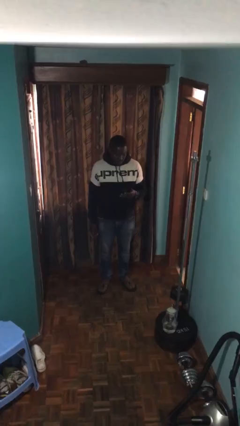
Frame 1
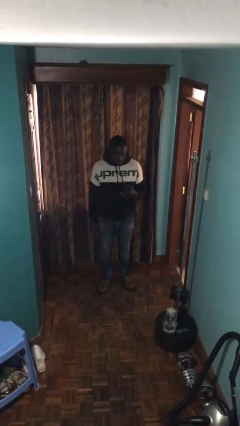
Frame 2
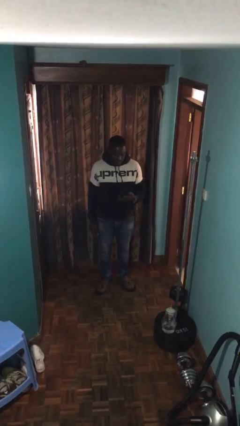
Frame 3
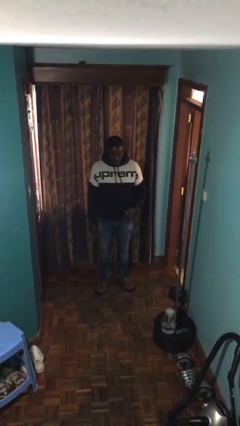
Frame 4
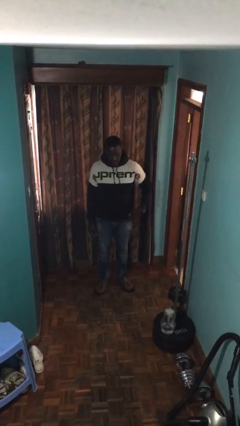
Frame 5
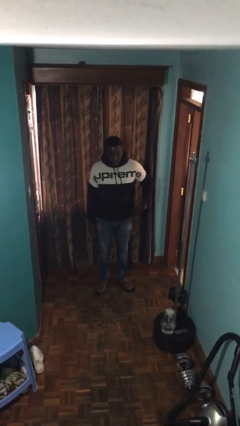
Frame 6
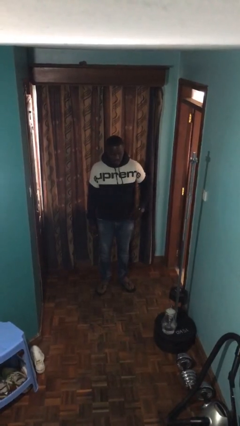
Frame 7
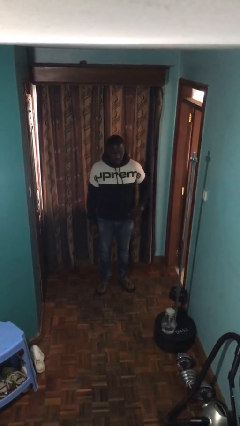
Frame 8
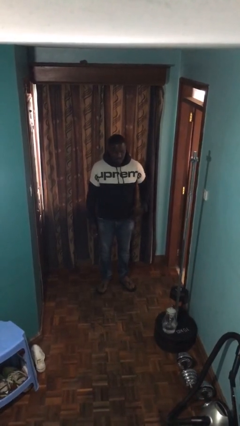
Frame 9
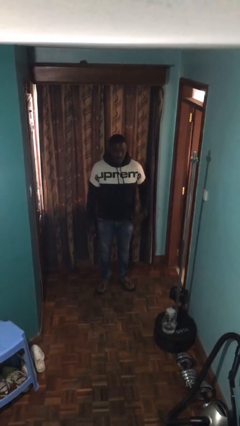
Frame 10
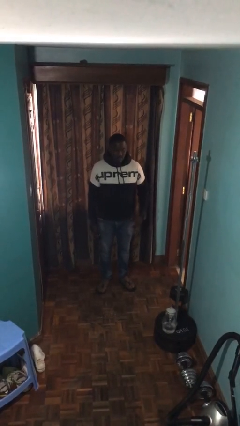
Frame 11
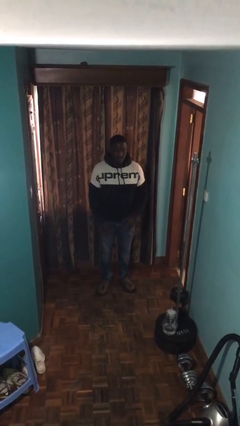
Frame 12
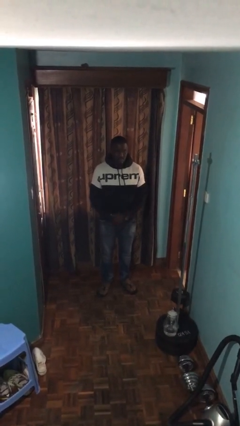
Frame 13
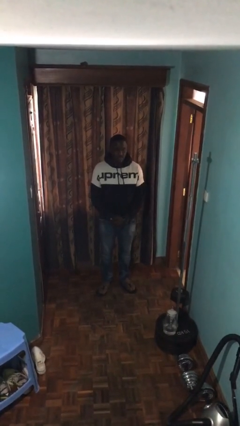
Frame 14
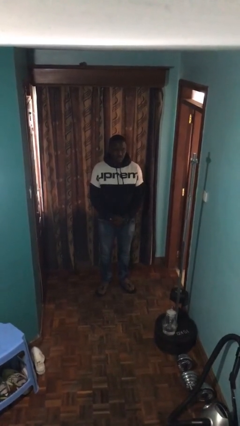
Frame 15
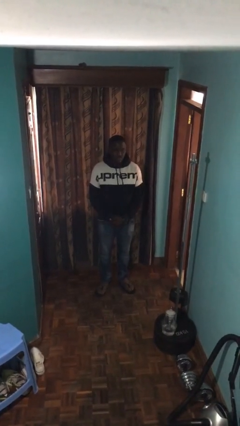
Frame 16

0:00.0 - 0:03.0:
person puts phone into pocket

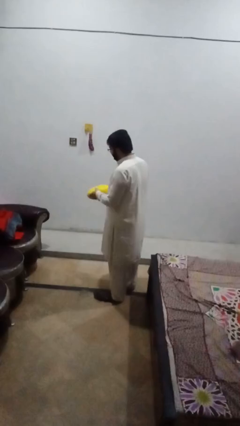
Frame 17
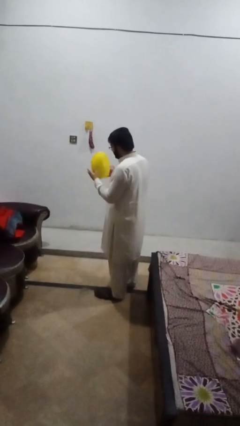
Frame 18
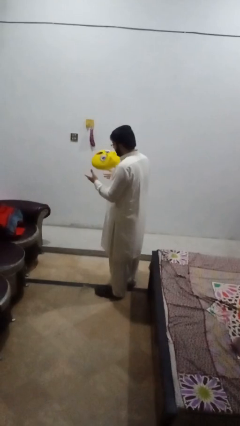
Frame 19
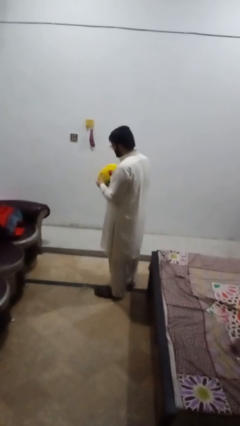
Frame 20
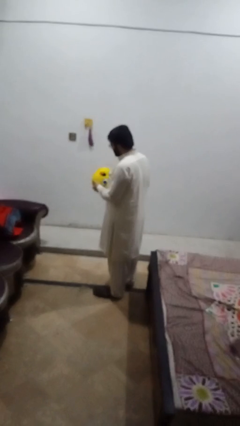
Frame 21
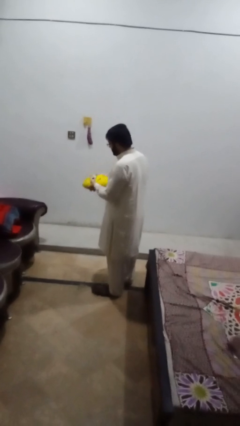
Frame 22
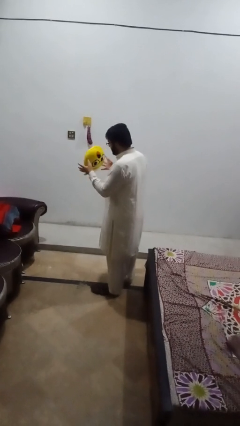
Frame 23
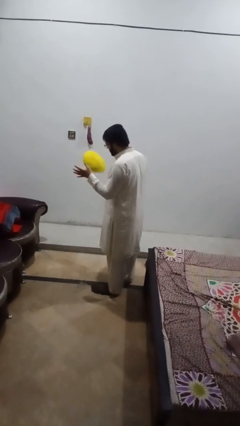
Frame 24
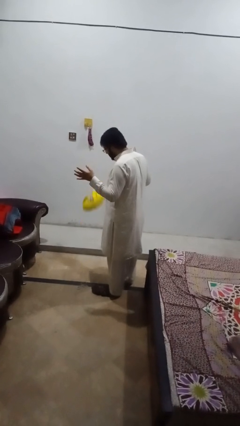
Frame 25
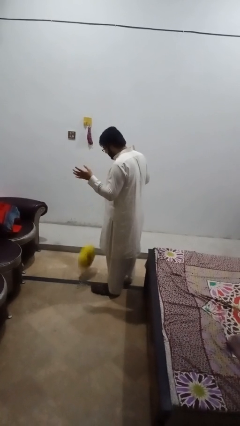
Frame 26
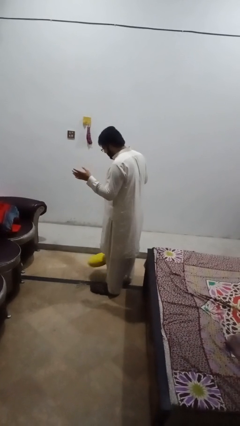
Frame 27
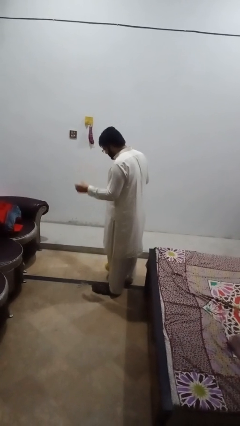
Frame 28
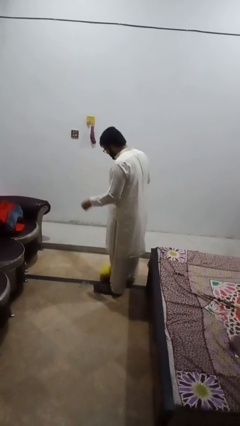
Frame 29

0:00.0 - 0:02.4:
person drops object

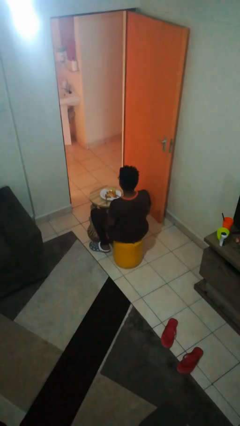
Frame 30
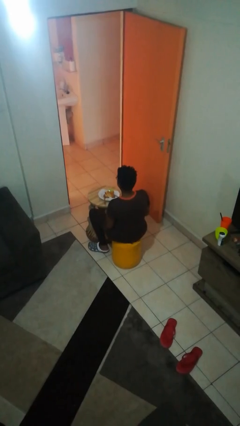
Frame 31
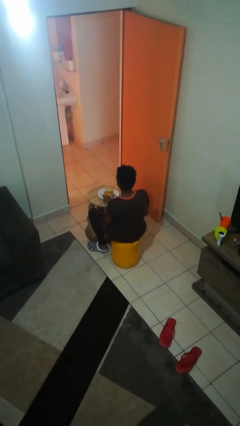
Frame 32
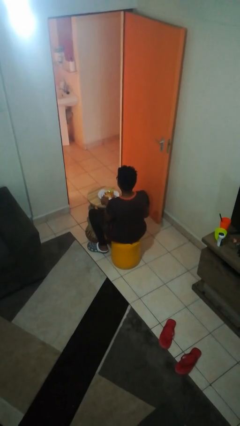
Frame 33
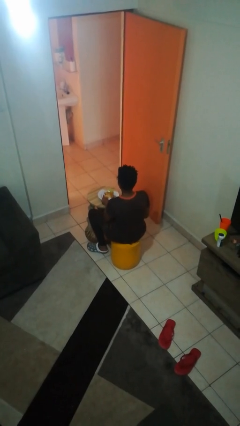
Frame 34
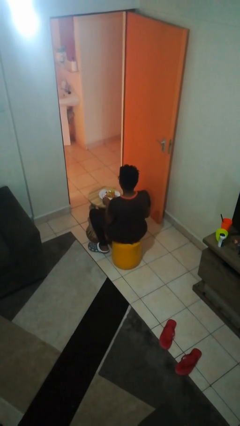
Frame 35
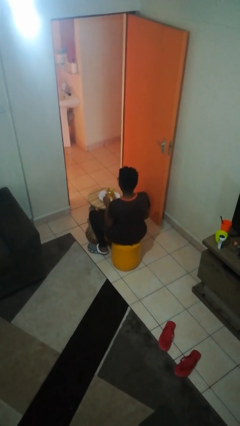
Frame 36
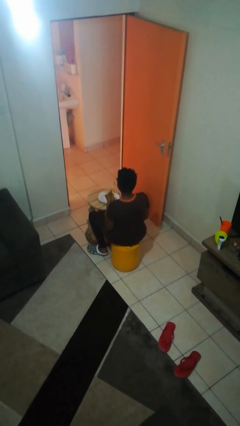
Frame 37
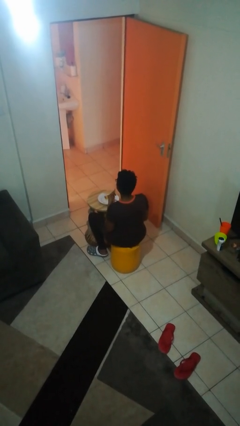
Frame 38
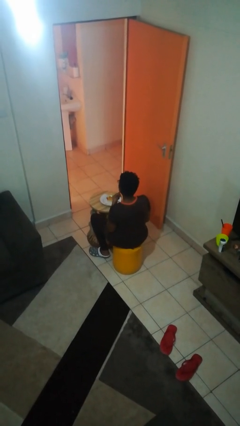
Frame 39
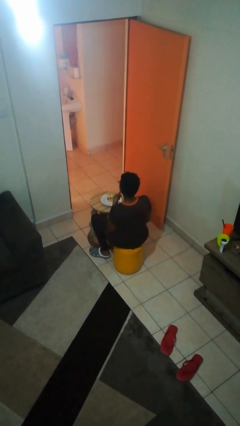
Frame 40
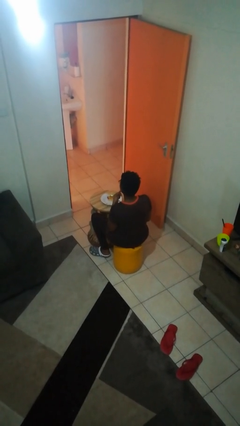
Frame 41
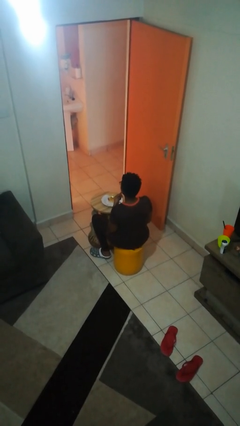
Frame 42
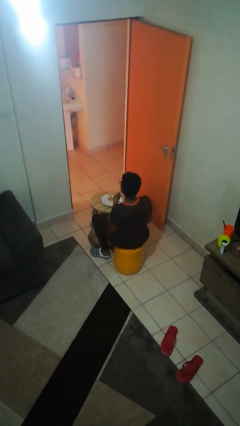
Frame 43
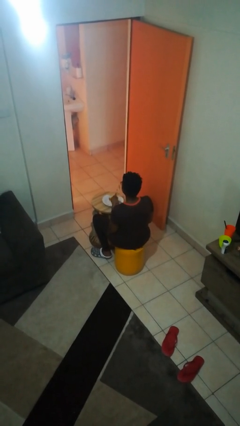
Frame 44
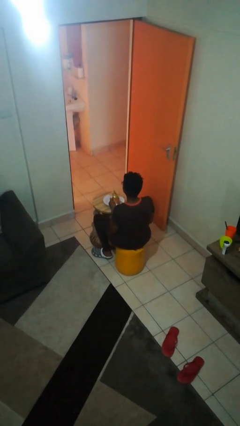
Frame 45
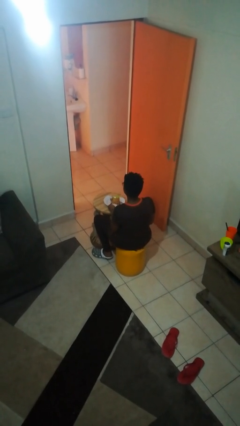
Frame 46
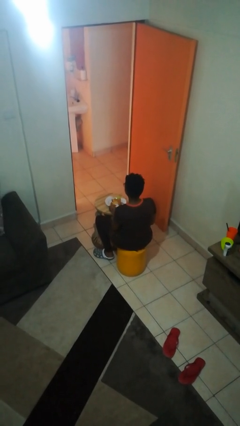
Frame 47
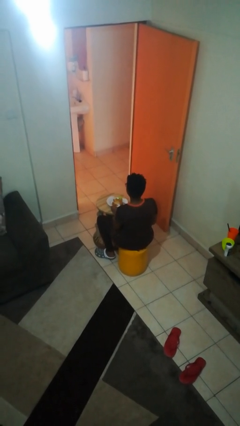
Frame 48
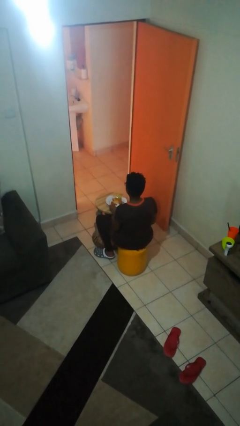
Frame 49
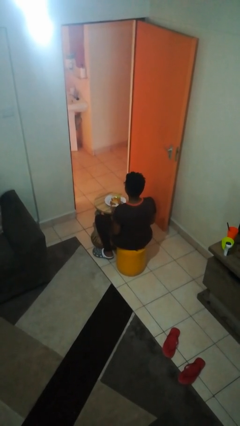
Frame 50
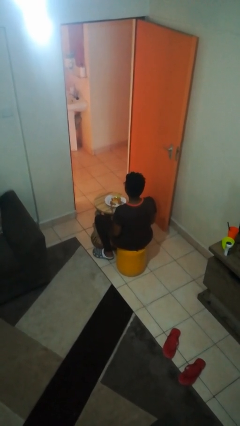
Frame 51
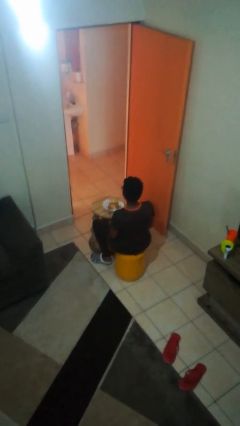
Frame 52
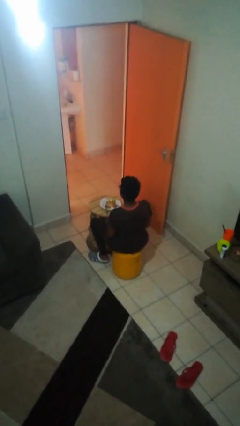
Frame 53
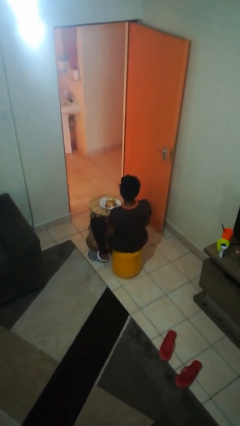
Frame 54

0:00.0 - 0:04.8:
person eats with utensil

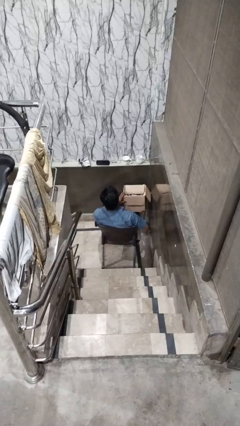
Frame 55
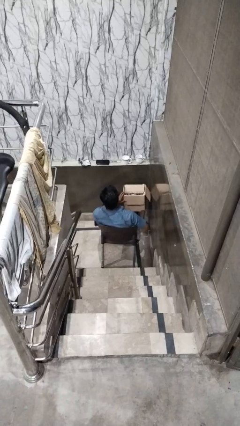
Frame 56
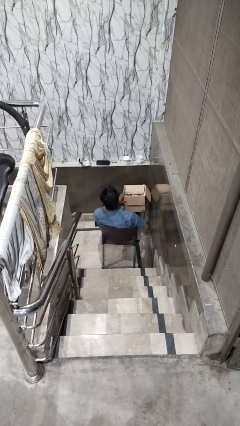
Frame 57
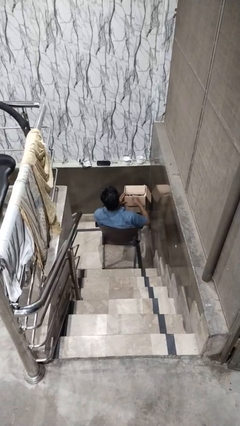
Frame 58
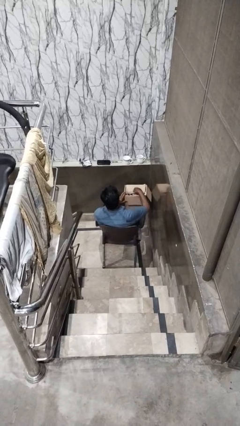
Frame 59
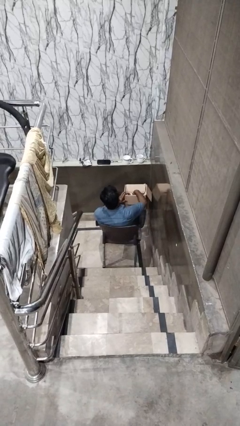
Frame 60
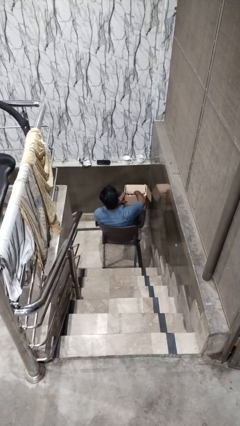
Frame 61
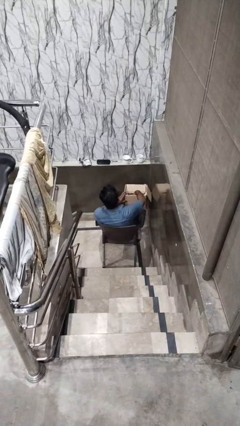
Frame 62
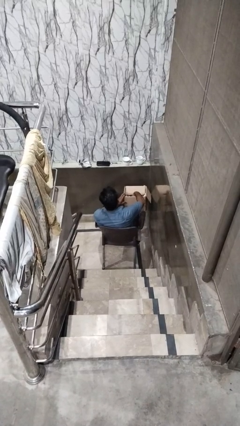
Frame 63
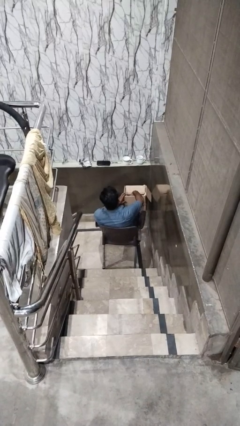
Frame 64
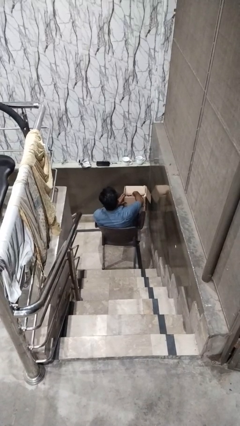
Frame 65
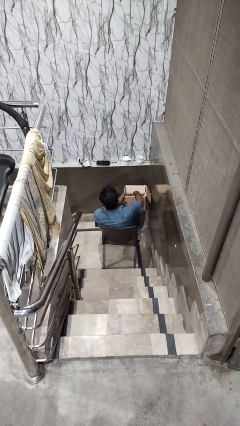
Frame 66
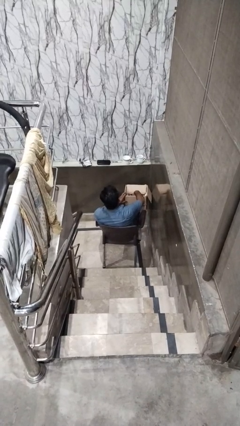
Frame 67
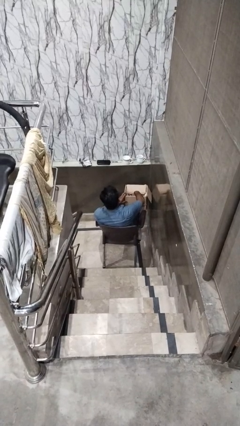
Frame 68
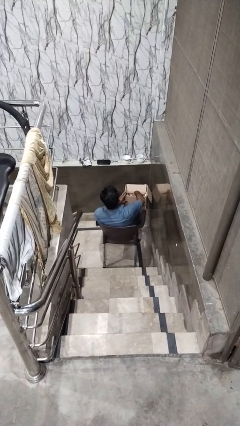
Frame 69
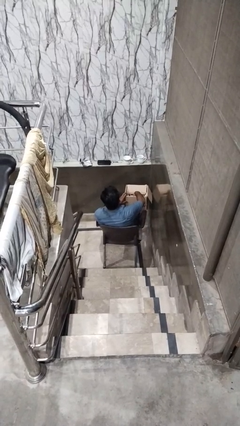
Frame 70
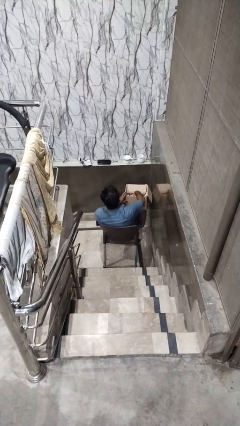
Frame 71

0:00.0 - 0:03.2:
person searches in box

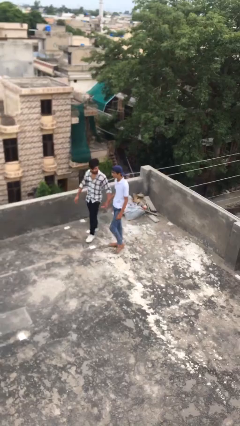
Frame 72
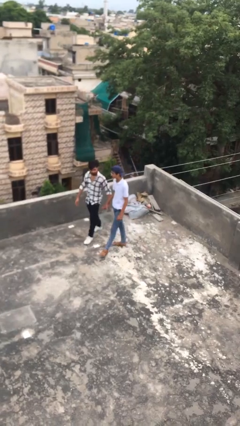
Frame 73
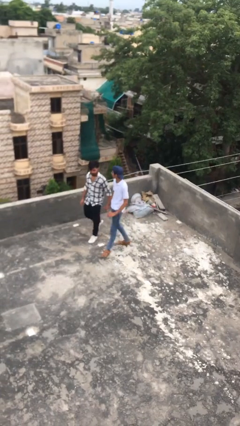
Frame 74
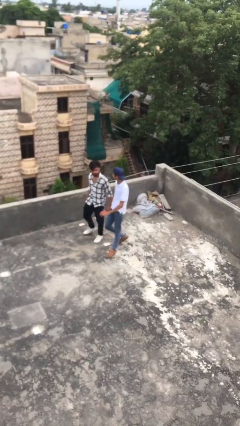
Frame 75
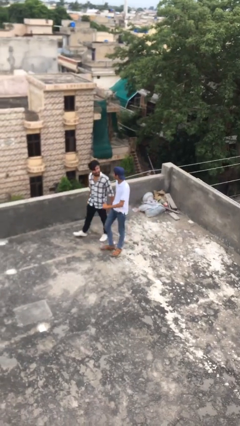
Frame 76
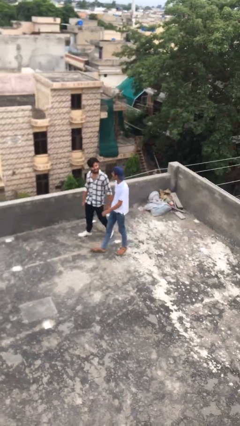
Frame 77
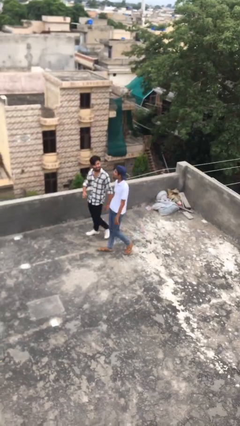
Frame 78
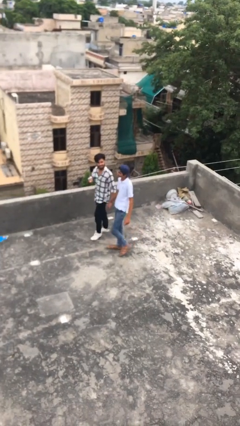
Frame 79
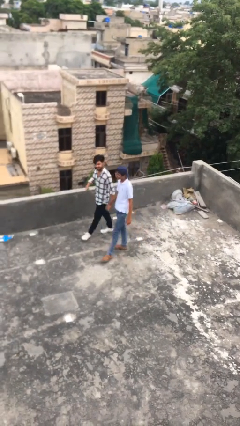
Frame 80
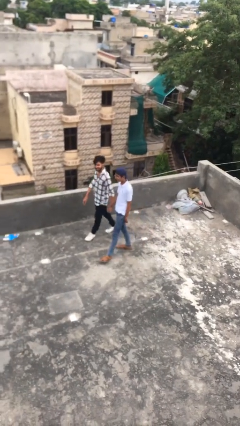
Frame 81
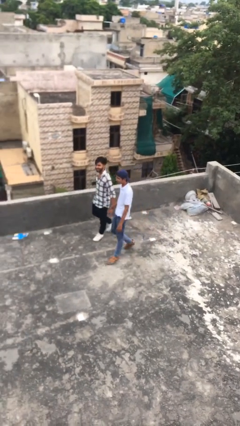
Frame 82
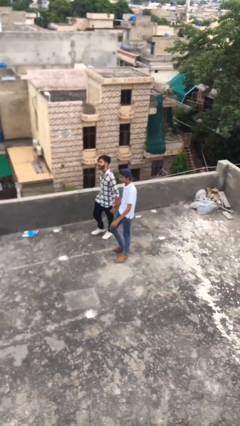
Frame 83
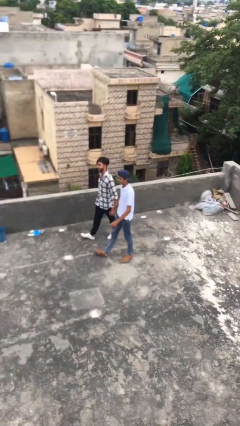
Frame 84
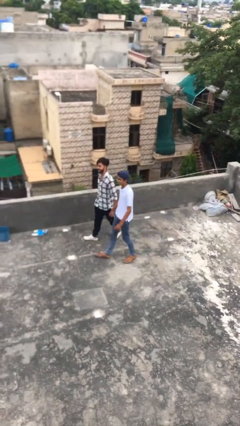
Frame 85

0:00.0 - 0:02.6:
person holds hand

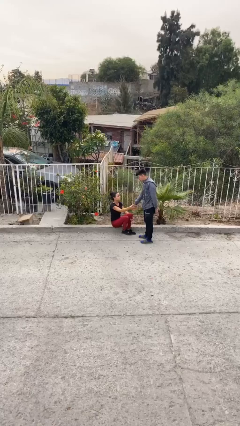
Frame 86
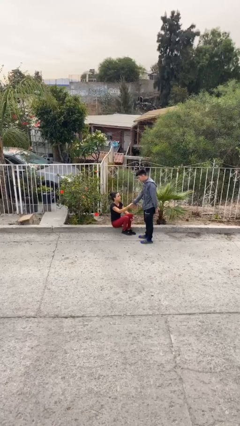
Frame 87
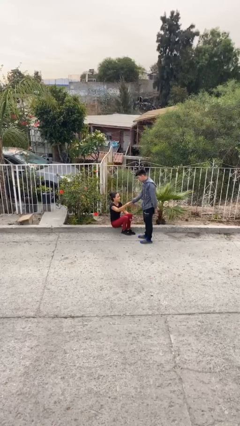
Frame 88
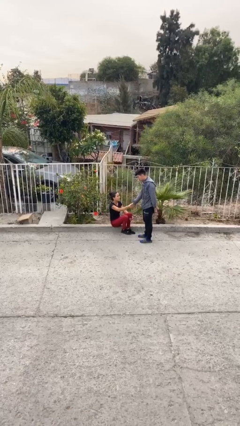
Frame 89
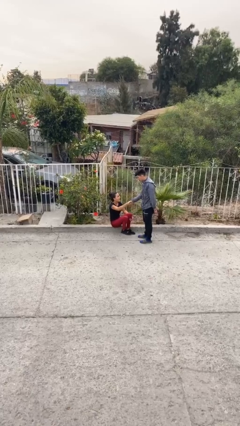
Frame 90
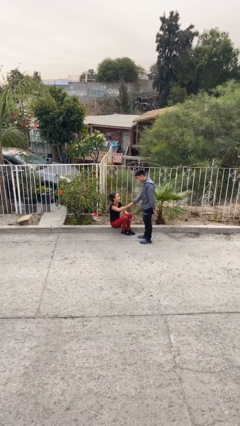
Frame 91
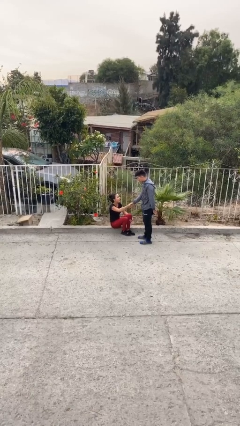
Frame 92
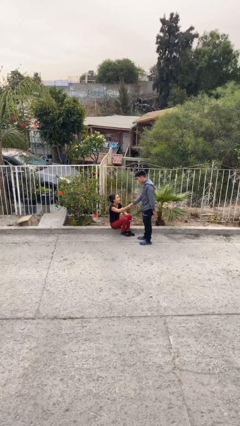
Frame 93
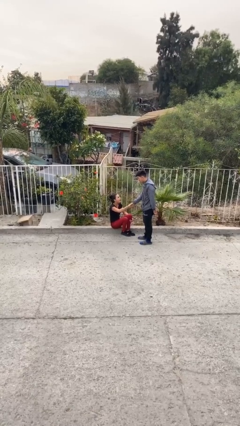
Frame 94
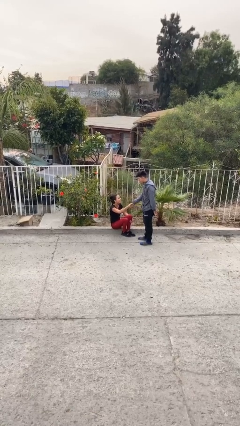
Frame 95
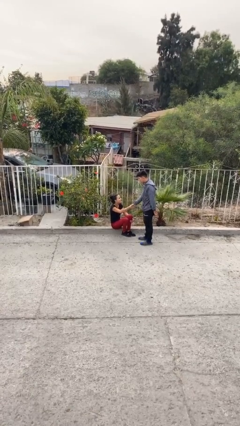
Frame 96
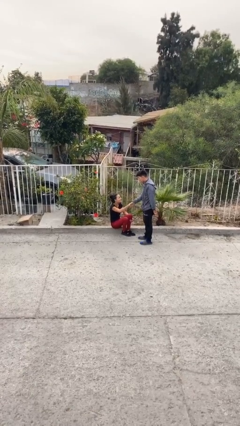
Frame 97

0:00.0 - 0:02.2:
person shakes hand
